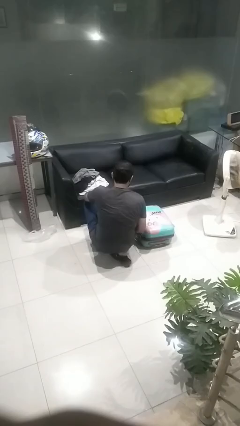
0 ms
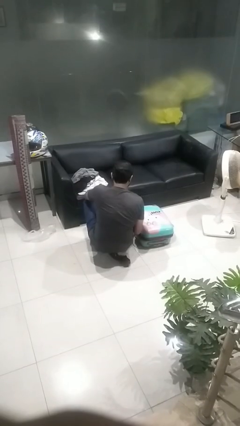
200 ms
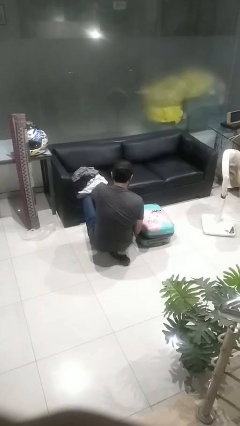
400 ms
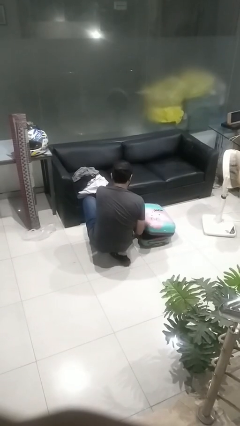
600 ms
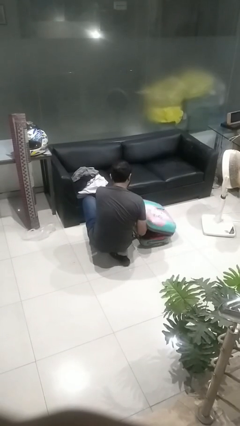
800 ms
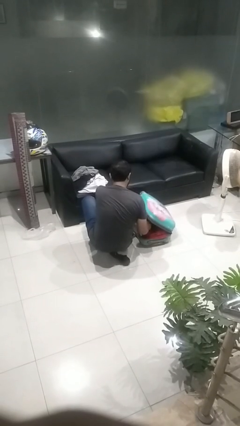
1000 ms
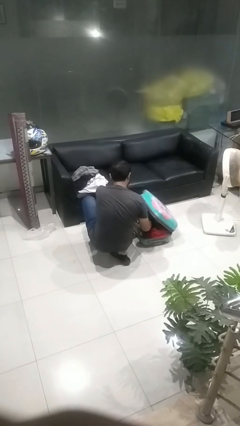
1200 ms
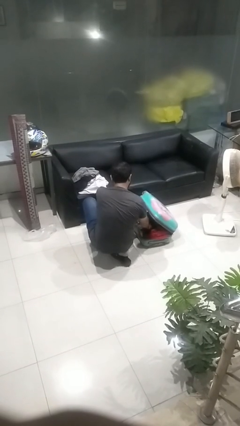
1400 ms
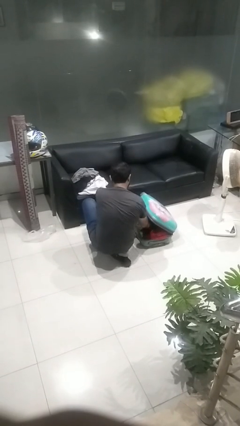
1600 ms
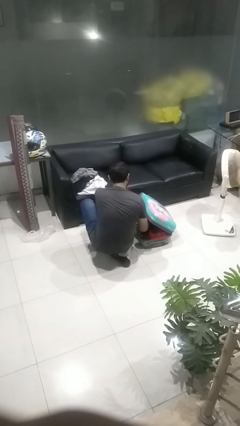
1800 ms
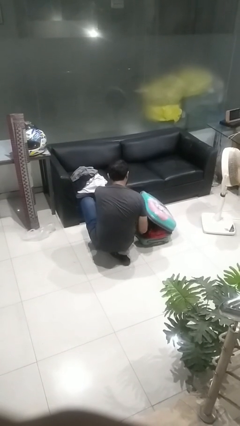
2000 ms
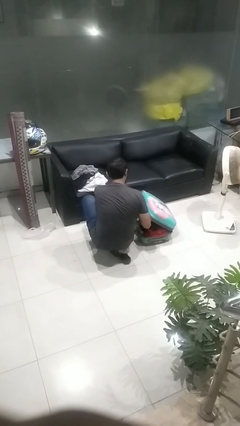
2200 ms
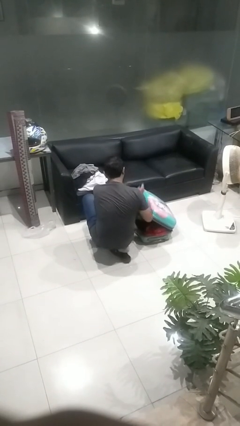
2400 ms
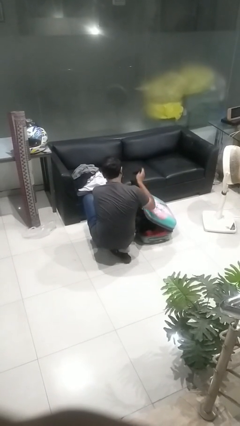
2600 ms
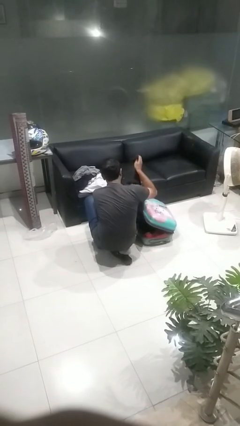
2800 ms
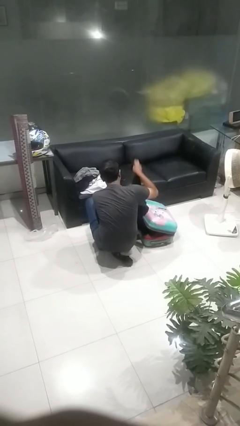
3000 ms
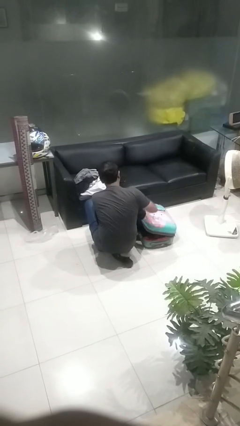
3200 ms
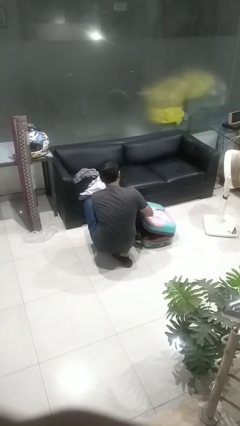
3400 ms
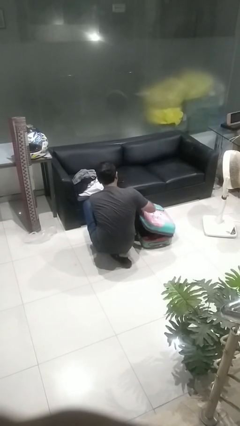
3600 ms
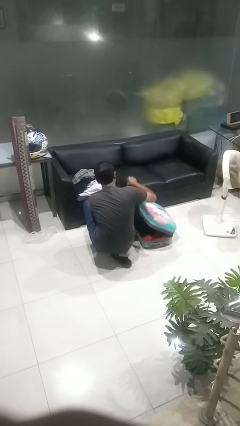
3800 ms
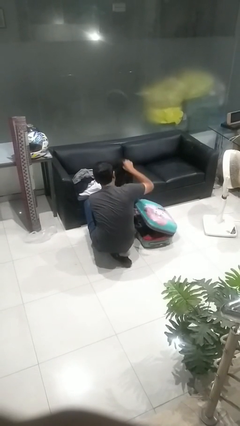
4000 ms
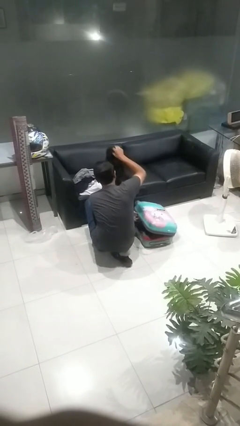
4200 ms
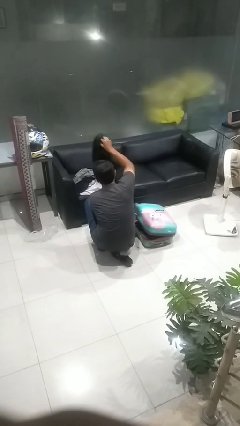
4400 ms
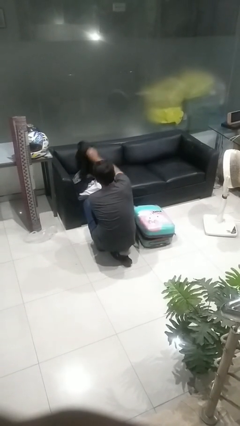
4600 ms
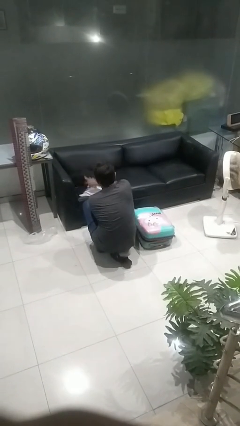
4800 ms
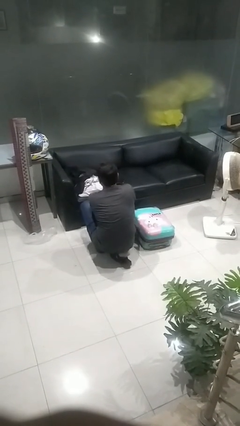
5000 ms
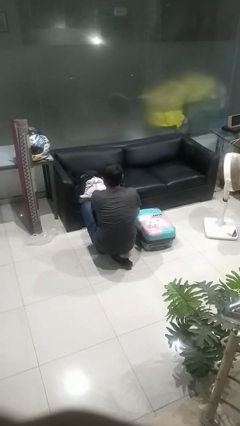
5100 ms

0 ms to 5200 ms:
person unloads clothes from suitcase

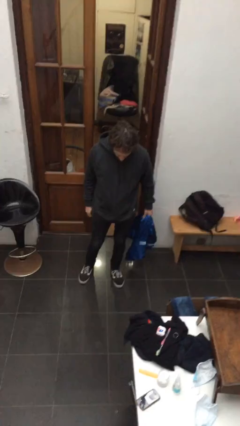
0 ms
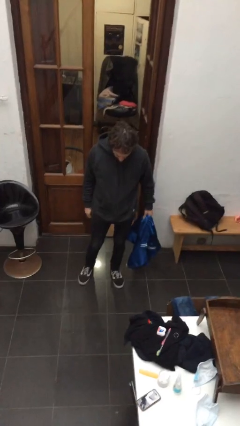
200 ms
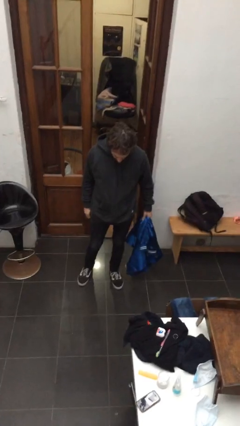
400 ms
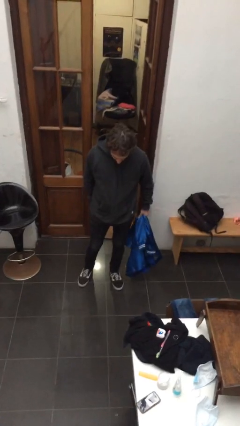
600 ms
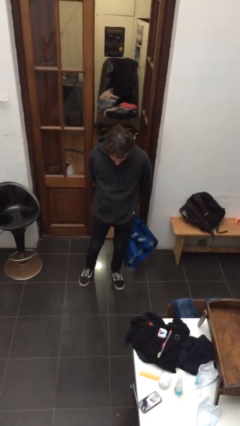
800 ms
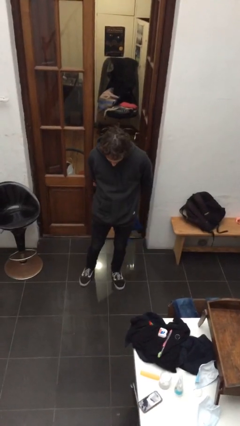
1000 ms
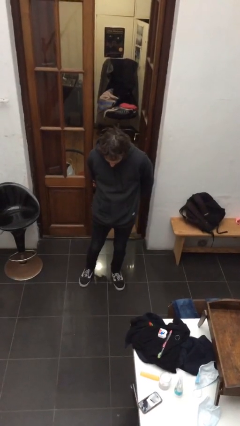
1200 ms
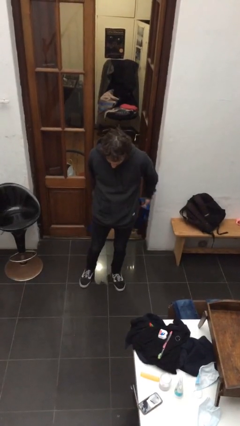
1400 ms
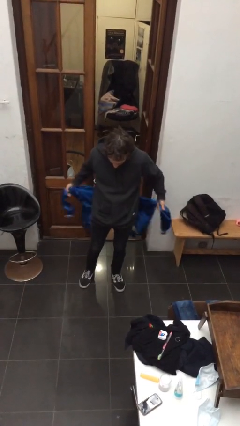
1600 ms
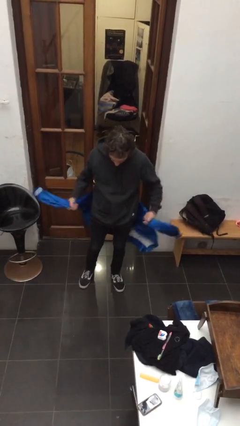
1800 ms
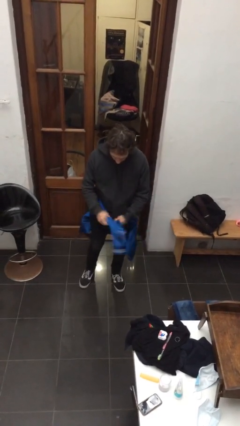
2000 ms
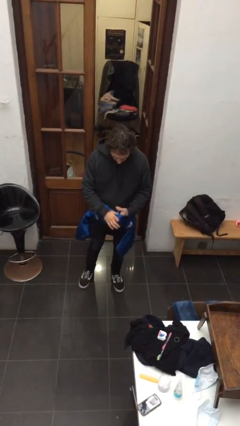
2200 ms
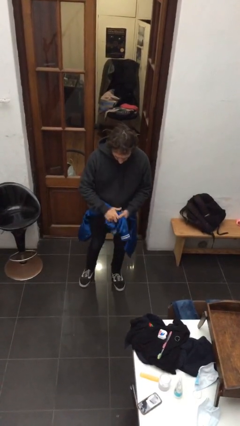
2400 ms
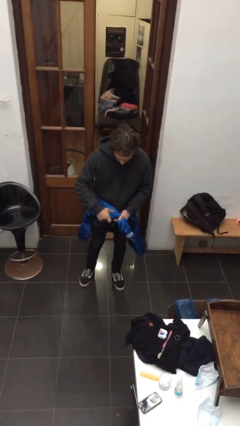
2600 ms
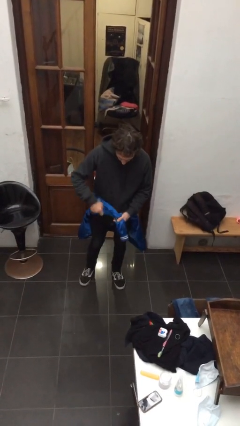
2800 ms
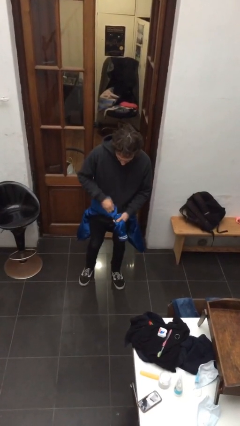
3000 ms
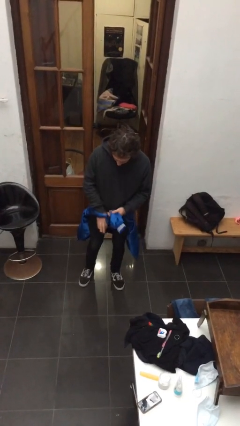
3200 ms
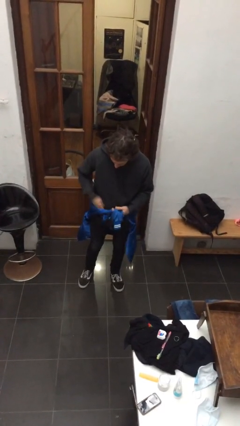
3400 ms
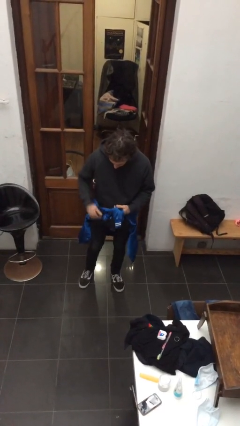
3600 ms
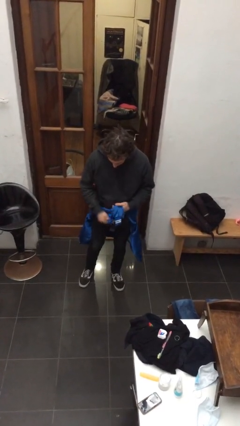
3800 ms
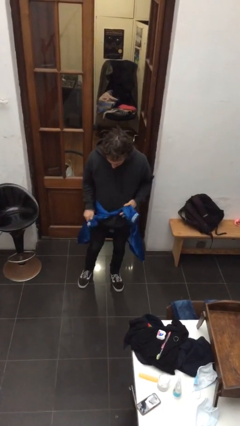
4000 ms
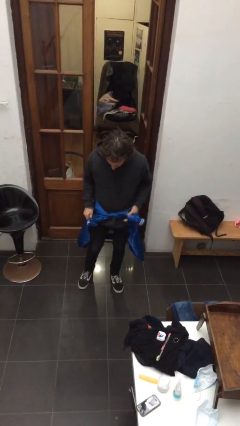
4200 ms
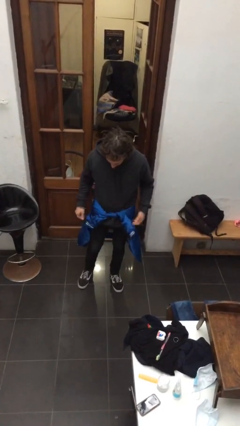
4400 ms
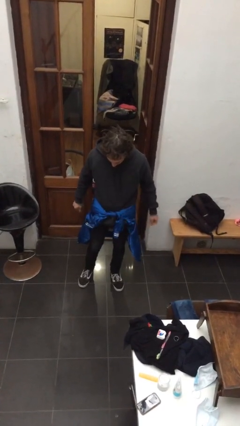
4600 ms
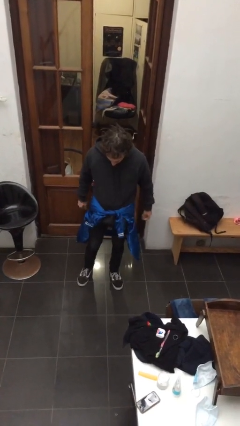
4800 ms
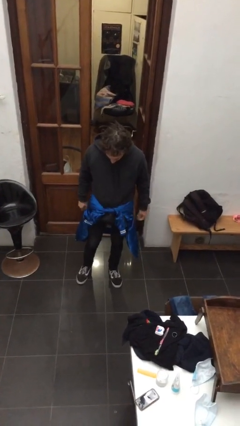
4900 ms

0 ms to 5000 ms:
person ties jacket around waist

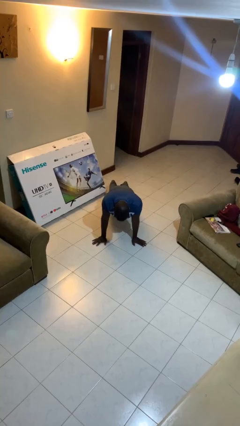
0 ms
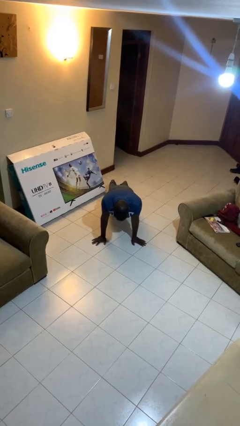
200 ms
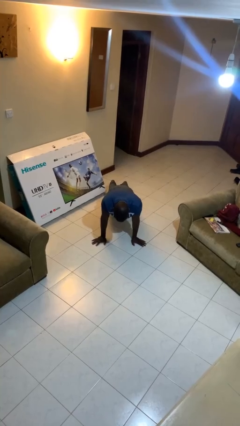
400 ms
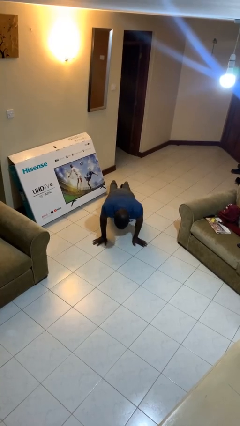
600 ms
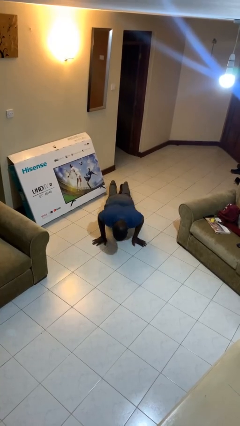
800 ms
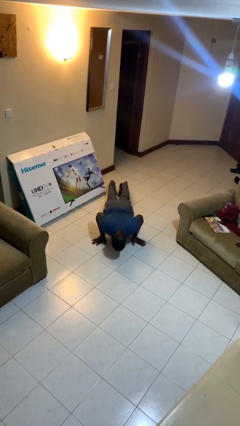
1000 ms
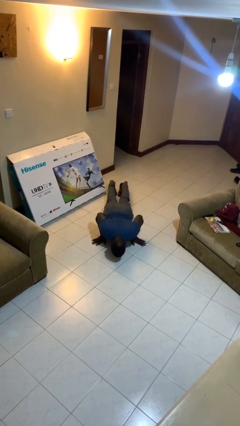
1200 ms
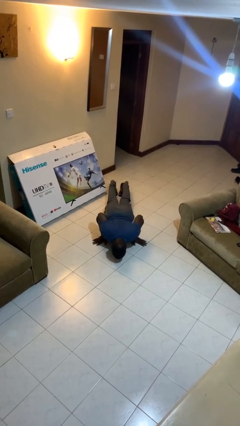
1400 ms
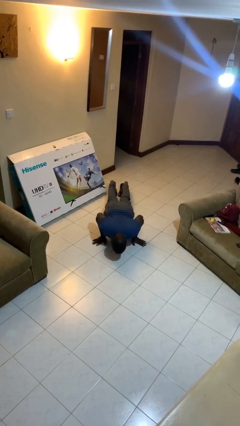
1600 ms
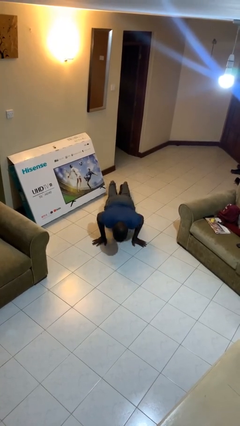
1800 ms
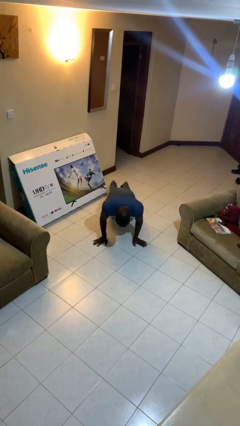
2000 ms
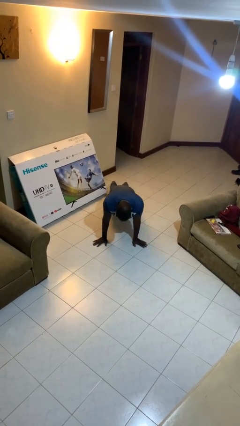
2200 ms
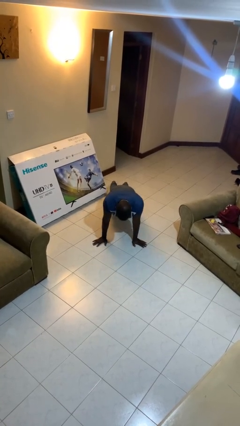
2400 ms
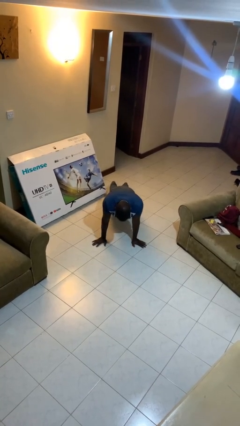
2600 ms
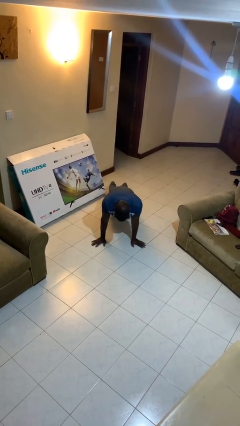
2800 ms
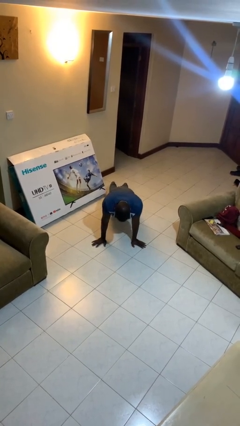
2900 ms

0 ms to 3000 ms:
person exercises with pushup

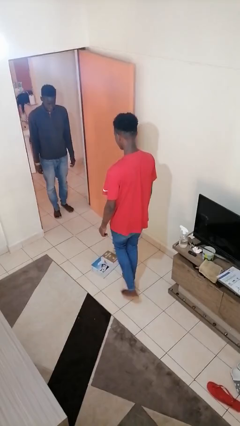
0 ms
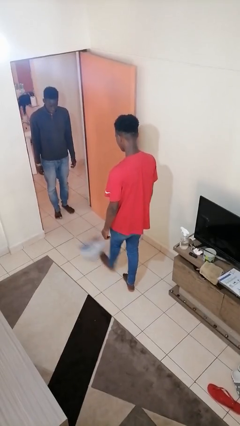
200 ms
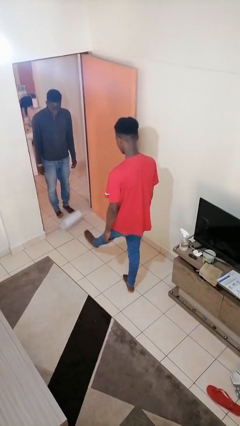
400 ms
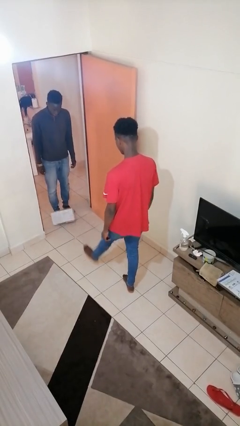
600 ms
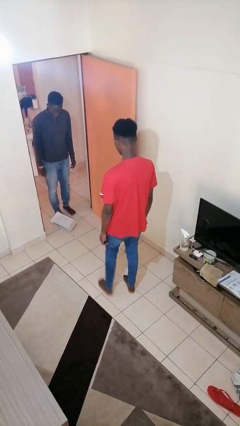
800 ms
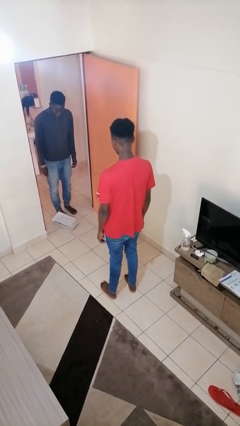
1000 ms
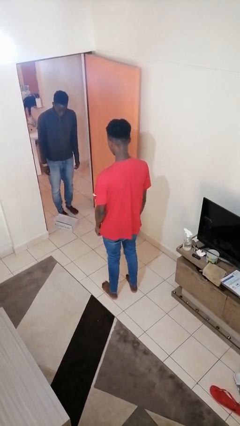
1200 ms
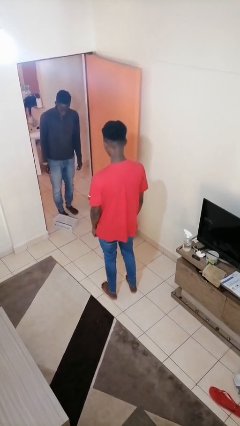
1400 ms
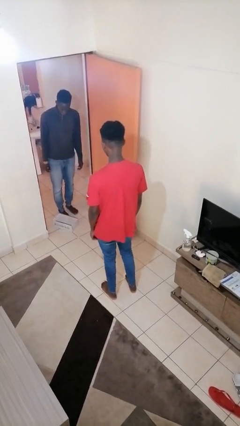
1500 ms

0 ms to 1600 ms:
person kicks object to person

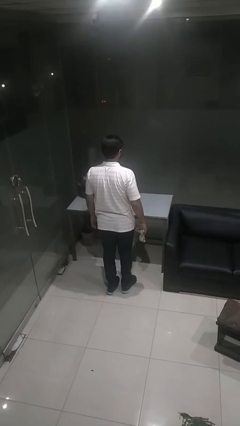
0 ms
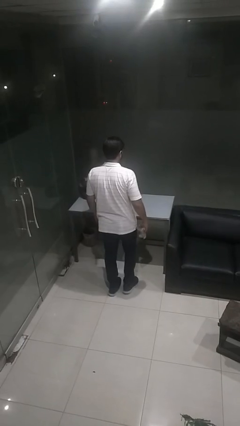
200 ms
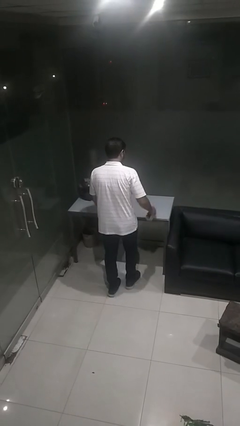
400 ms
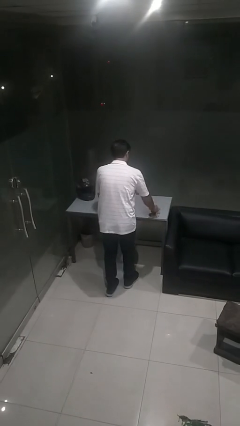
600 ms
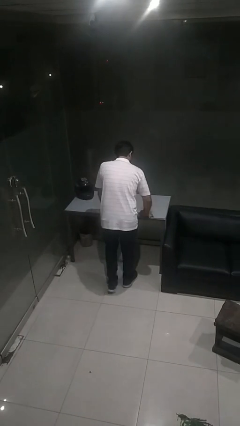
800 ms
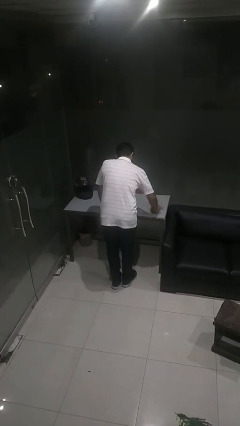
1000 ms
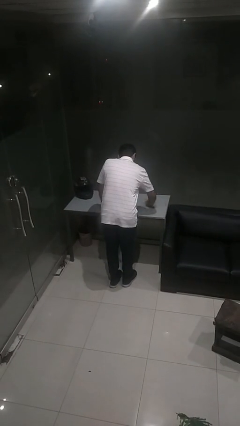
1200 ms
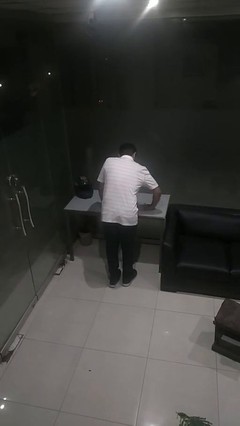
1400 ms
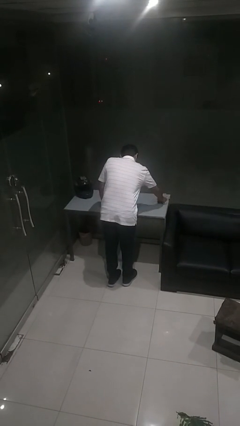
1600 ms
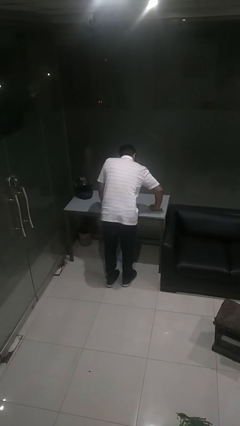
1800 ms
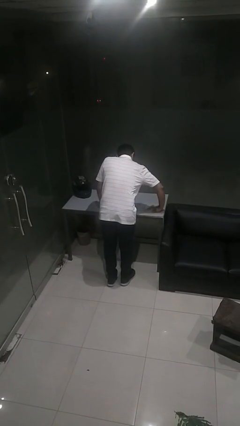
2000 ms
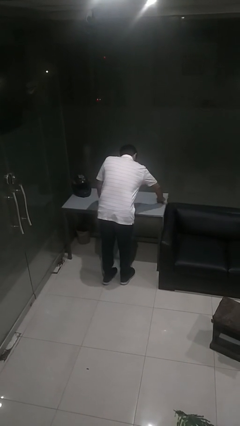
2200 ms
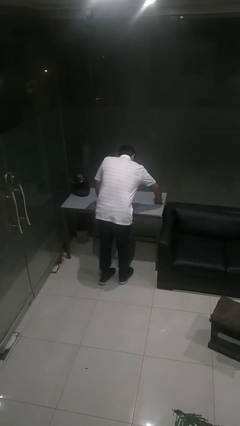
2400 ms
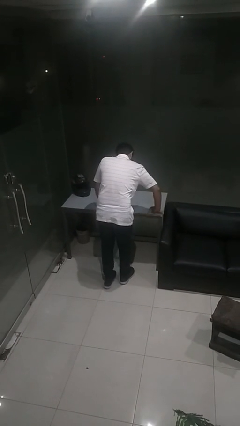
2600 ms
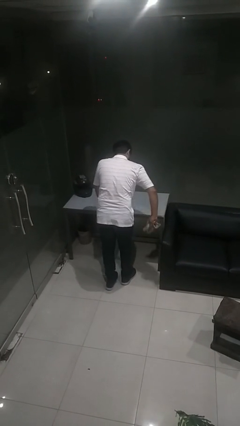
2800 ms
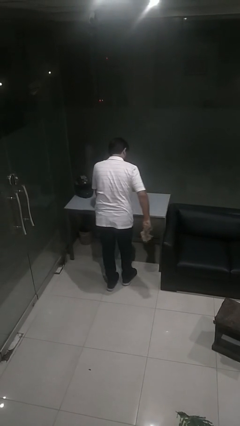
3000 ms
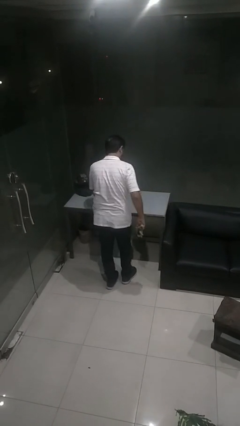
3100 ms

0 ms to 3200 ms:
person cleans table with rag
